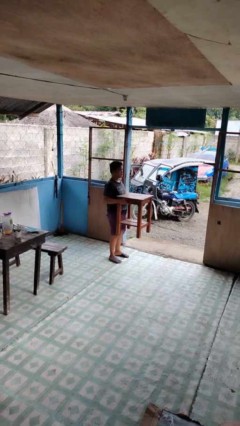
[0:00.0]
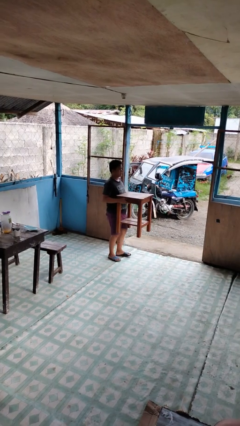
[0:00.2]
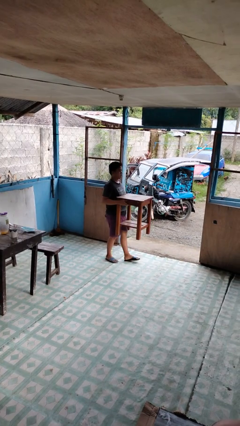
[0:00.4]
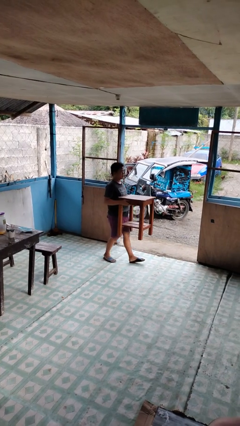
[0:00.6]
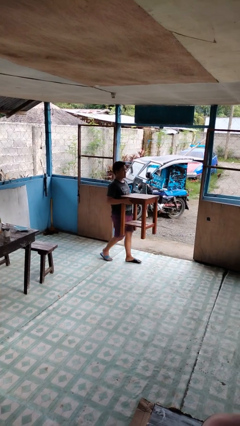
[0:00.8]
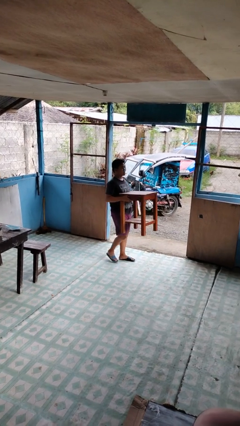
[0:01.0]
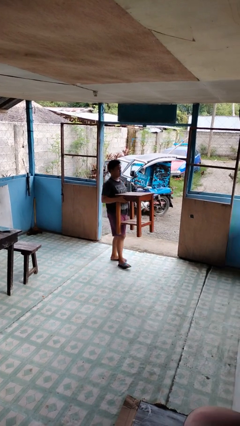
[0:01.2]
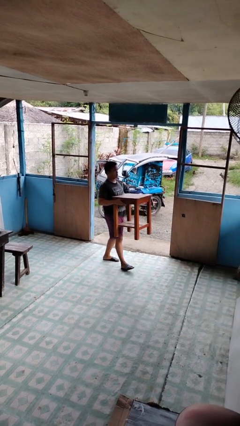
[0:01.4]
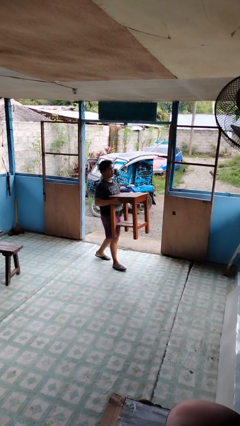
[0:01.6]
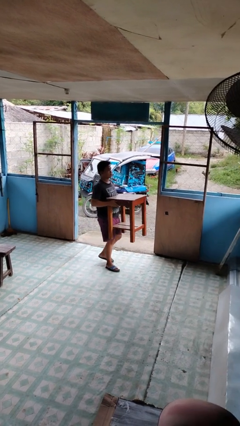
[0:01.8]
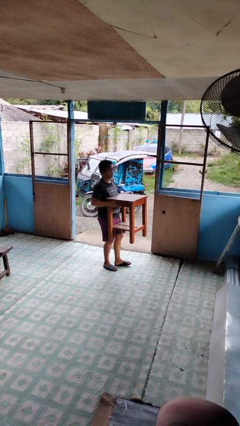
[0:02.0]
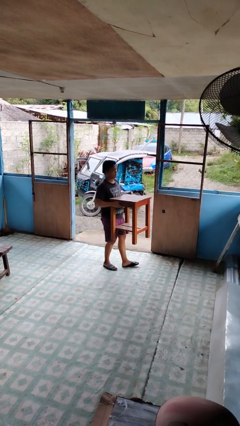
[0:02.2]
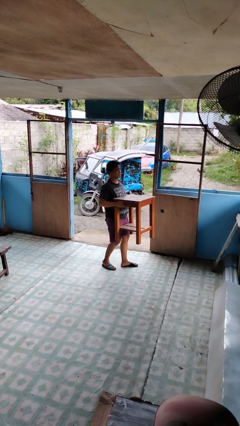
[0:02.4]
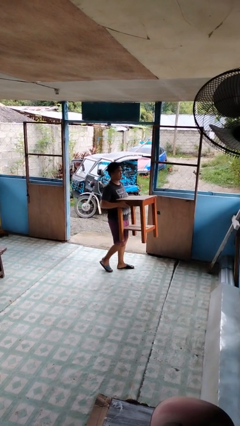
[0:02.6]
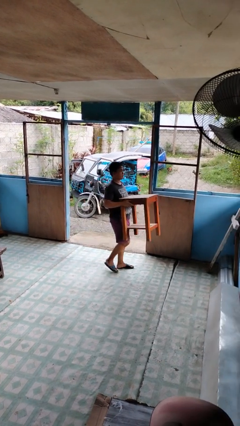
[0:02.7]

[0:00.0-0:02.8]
person carries furniture

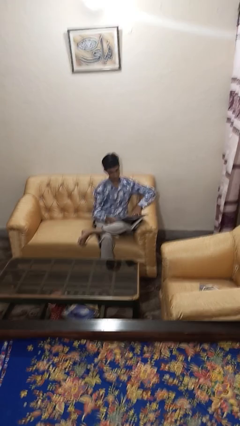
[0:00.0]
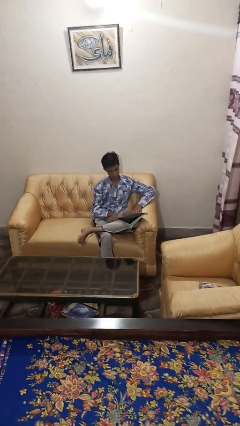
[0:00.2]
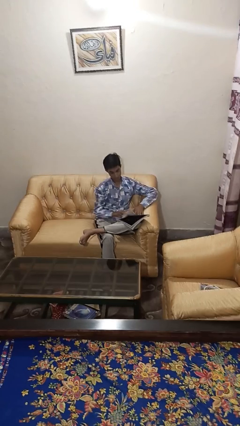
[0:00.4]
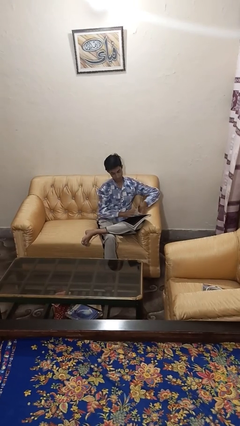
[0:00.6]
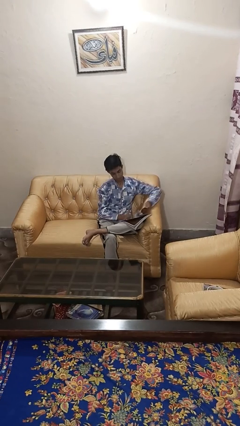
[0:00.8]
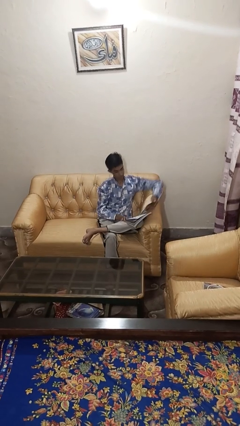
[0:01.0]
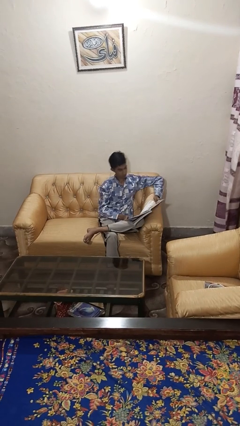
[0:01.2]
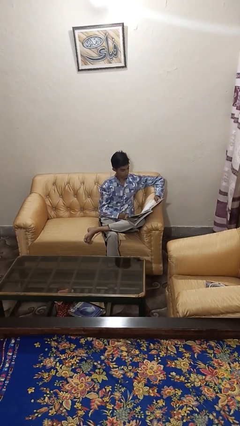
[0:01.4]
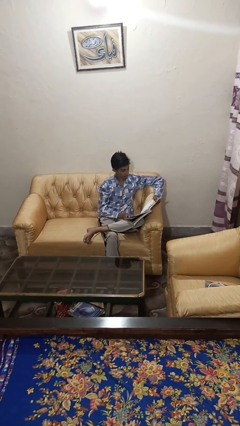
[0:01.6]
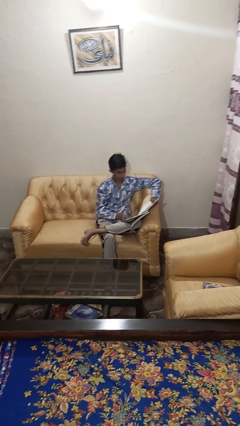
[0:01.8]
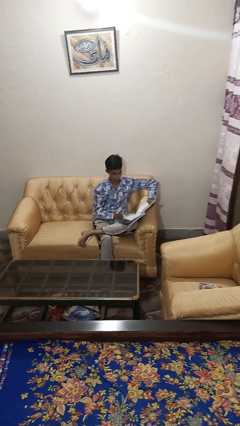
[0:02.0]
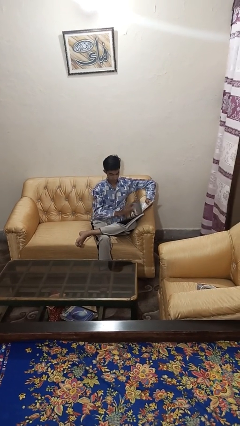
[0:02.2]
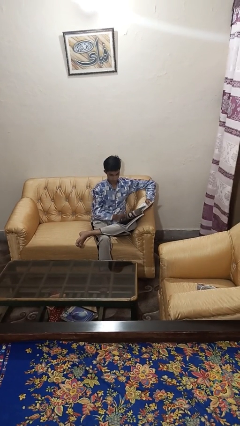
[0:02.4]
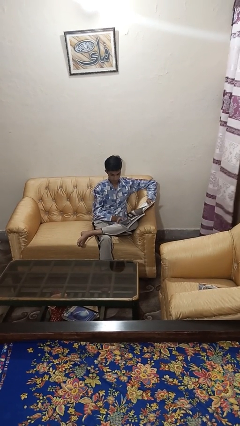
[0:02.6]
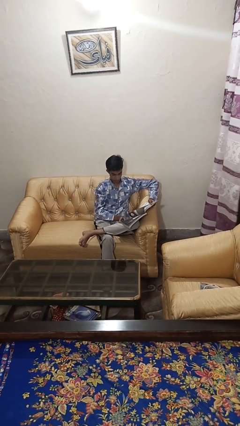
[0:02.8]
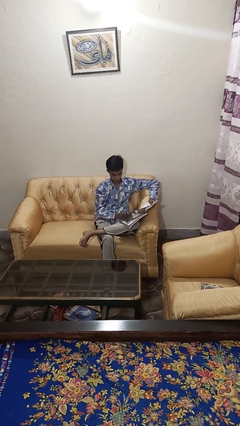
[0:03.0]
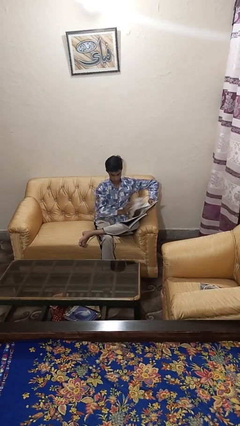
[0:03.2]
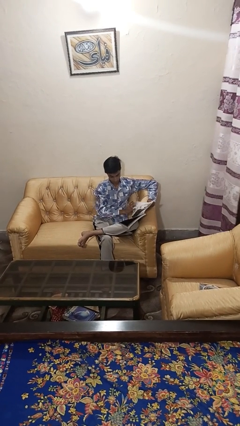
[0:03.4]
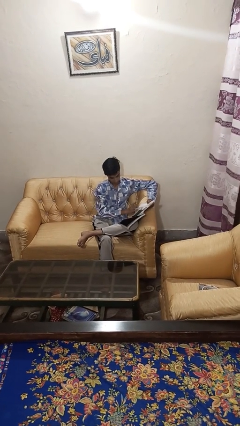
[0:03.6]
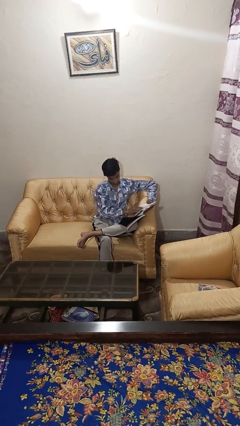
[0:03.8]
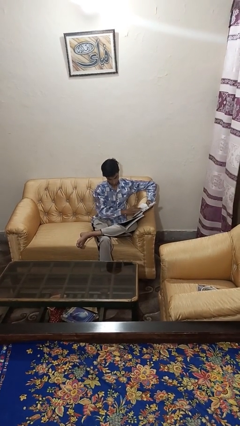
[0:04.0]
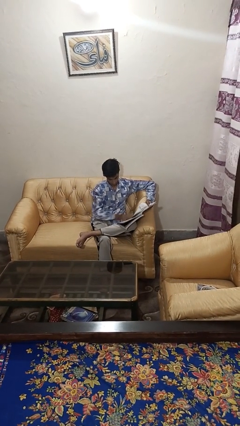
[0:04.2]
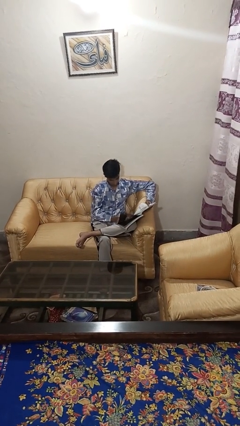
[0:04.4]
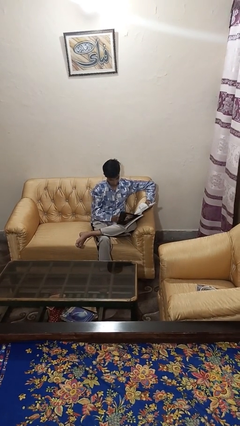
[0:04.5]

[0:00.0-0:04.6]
person reads magazine

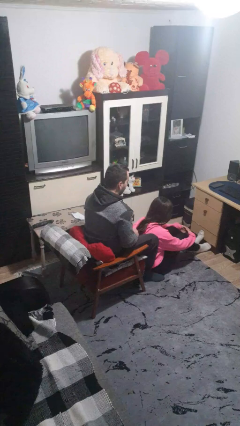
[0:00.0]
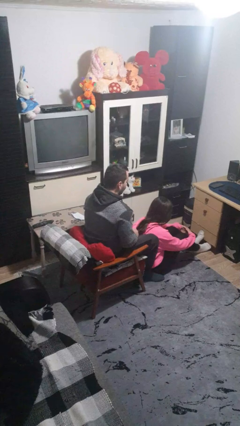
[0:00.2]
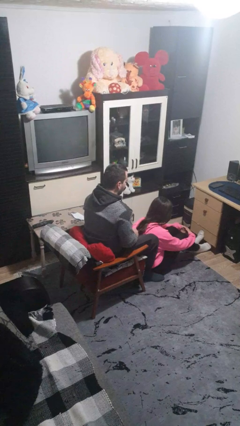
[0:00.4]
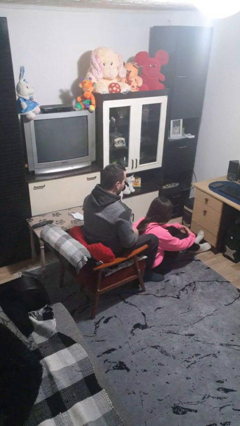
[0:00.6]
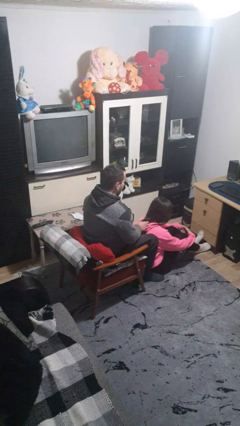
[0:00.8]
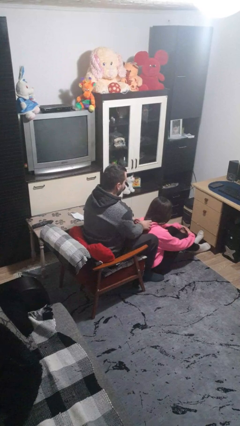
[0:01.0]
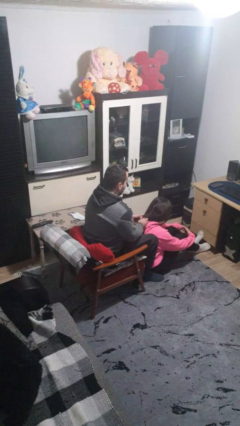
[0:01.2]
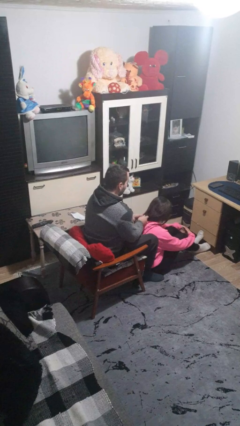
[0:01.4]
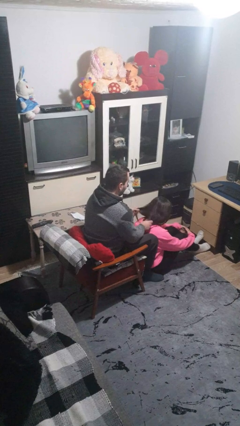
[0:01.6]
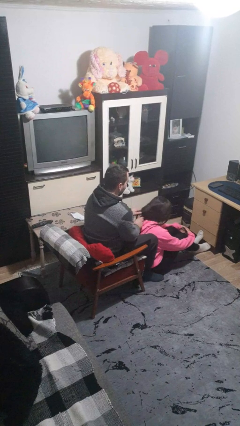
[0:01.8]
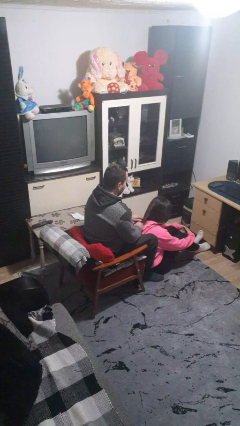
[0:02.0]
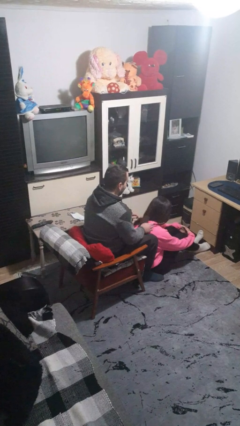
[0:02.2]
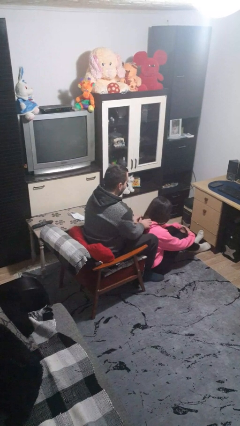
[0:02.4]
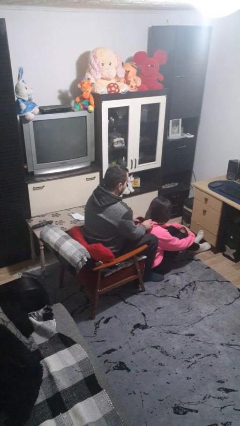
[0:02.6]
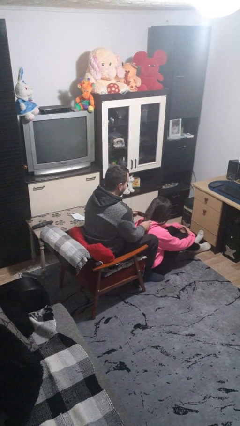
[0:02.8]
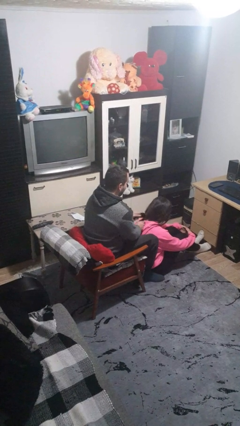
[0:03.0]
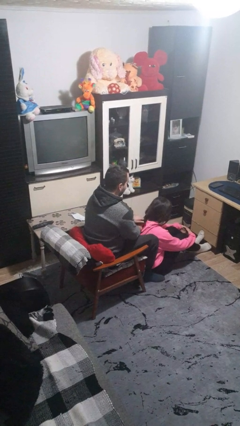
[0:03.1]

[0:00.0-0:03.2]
person braids hair of person

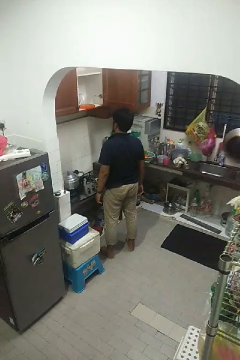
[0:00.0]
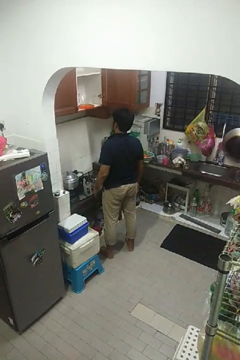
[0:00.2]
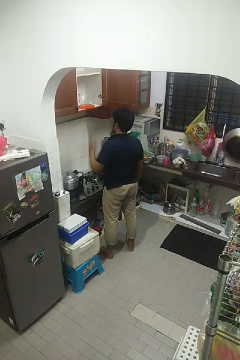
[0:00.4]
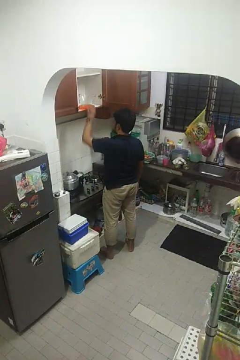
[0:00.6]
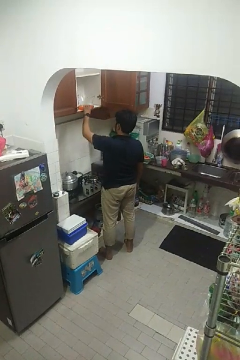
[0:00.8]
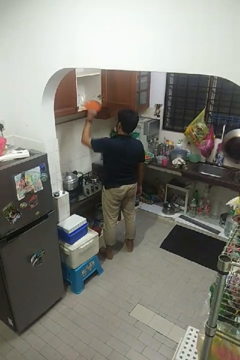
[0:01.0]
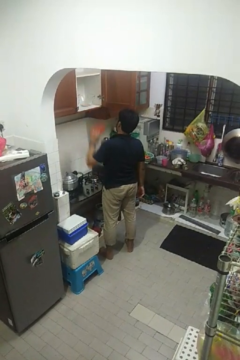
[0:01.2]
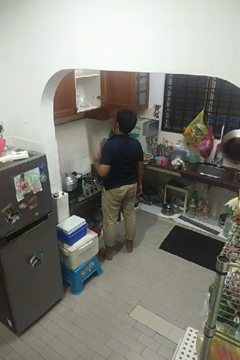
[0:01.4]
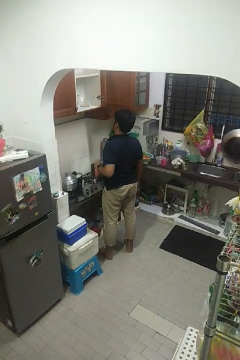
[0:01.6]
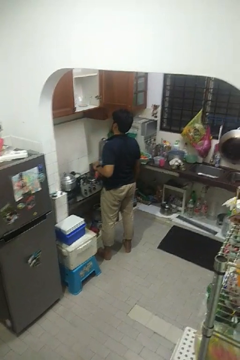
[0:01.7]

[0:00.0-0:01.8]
person takes object from cabinet

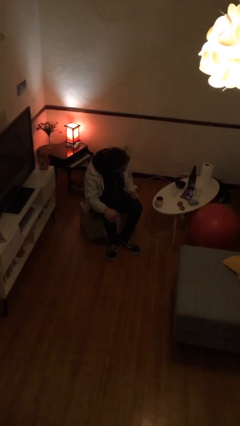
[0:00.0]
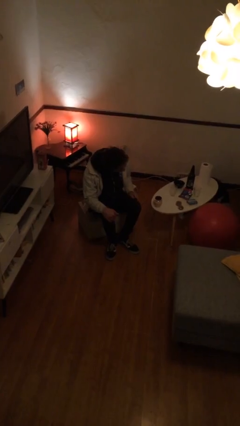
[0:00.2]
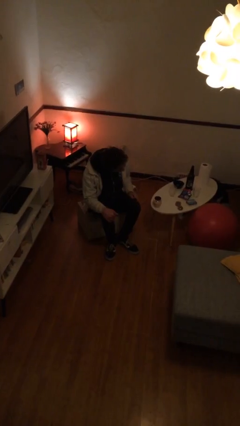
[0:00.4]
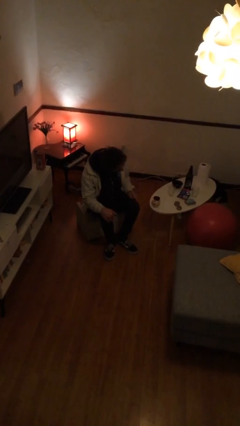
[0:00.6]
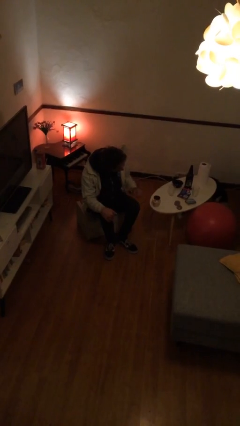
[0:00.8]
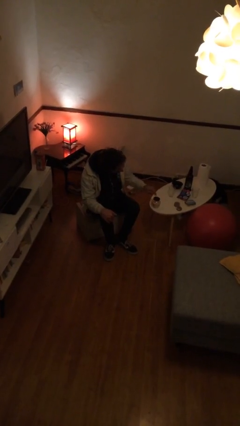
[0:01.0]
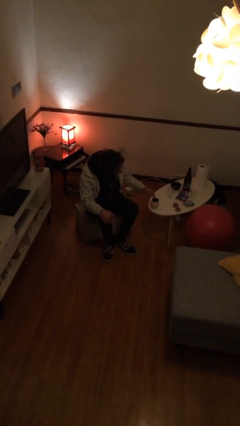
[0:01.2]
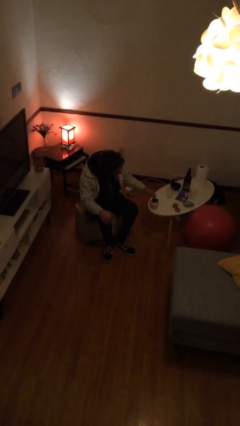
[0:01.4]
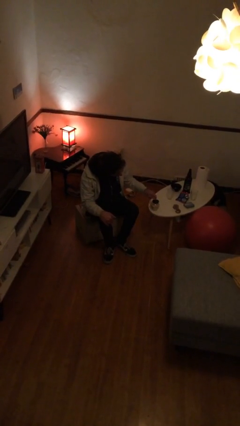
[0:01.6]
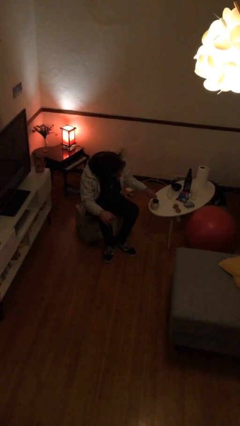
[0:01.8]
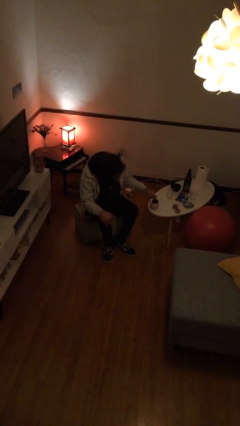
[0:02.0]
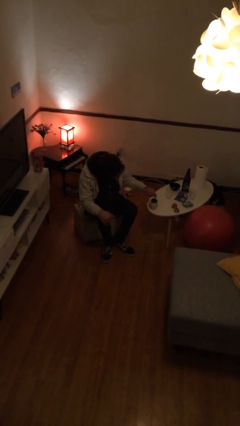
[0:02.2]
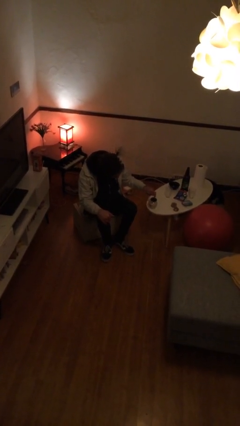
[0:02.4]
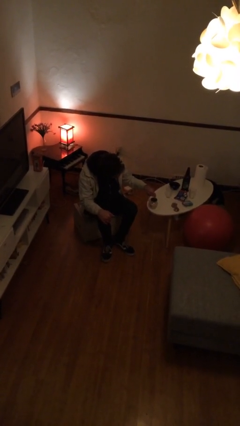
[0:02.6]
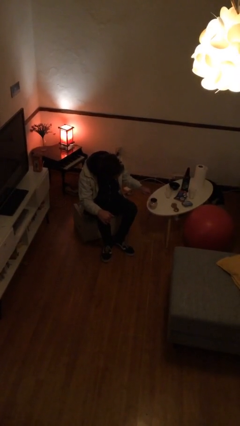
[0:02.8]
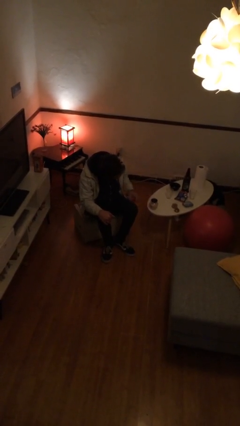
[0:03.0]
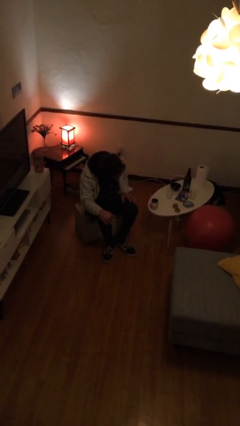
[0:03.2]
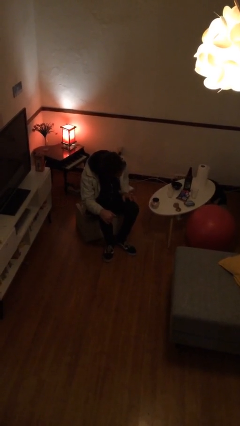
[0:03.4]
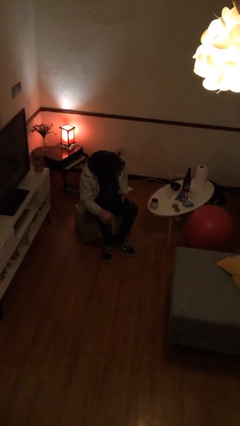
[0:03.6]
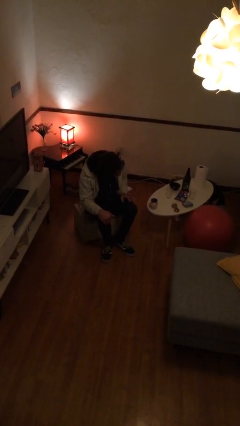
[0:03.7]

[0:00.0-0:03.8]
person taps object with finger

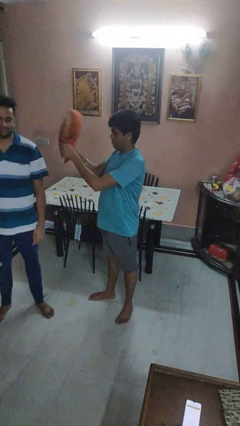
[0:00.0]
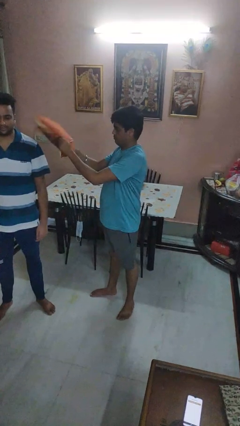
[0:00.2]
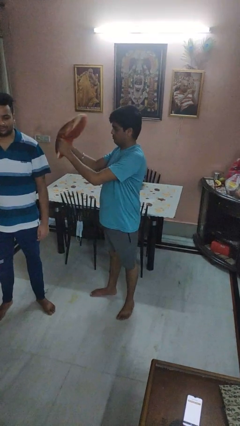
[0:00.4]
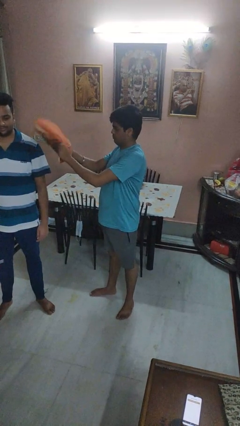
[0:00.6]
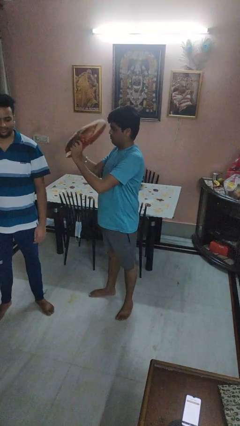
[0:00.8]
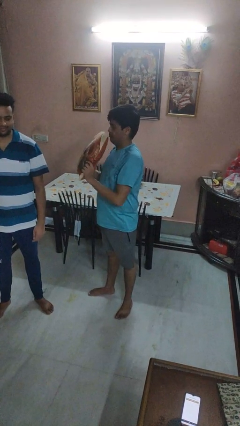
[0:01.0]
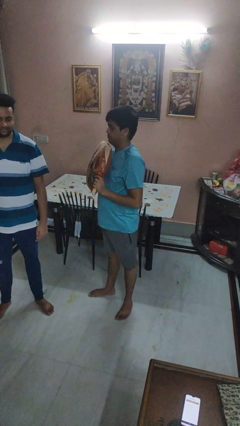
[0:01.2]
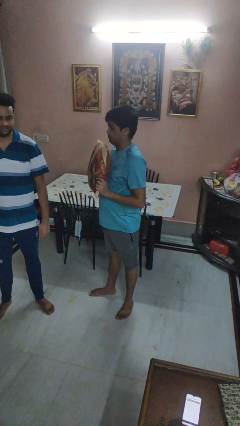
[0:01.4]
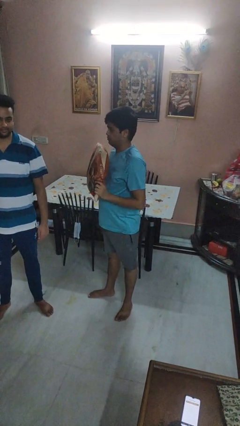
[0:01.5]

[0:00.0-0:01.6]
person hits person with pillow
